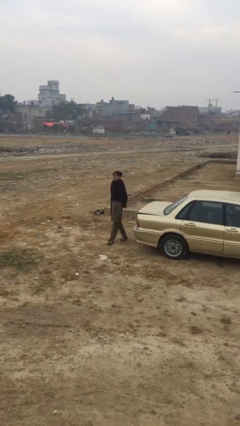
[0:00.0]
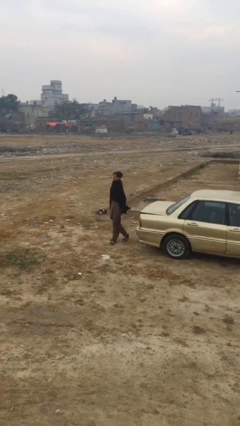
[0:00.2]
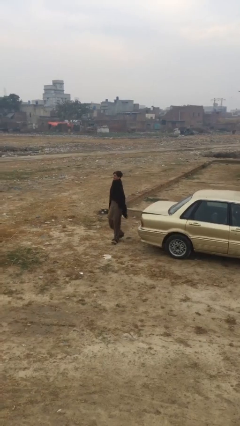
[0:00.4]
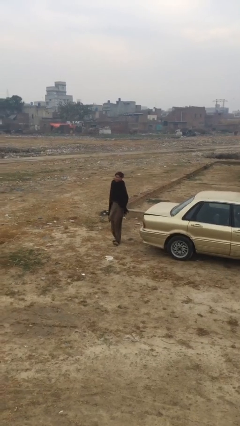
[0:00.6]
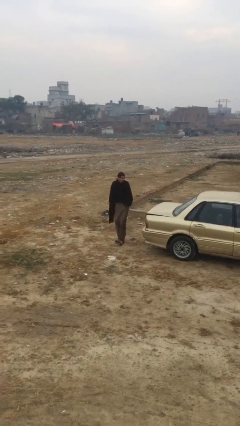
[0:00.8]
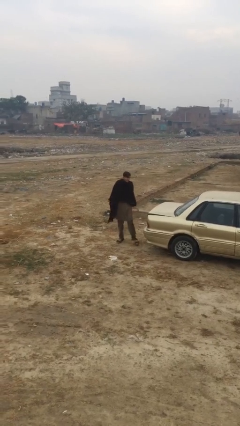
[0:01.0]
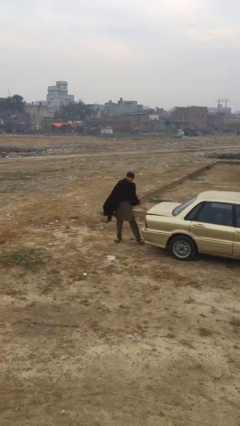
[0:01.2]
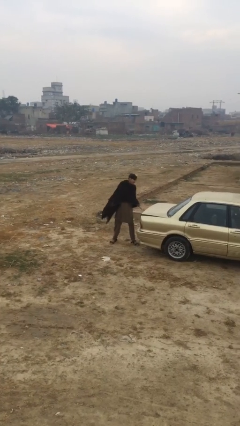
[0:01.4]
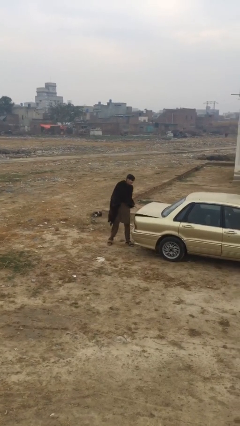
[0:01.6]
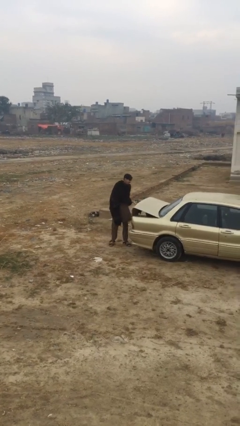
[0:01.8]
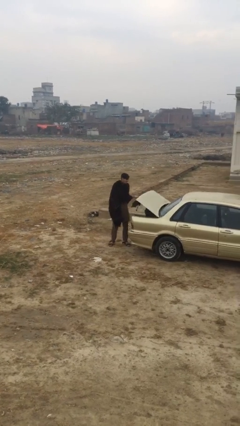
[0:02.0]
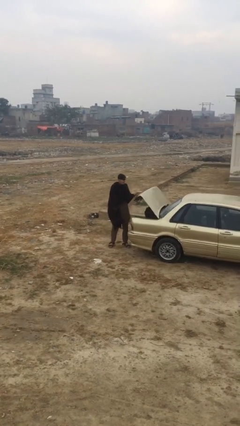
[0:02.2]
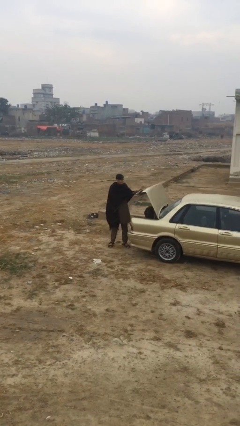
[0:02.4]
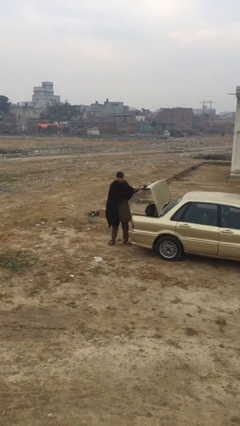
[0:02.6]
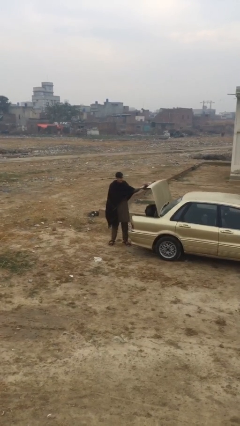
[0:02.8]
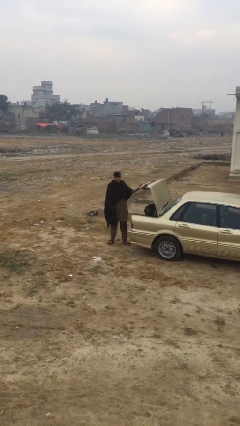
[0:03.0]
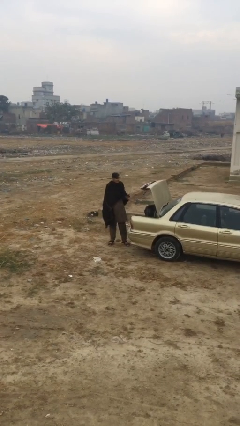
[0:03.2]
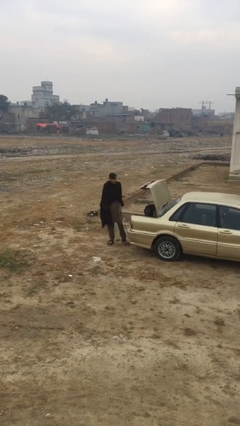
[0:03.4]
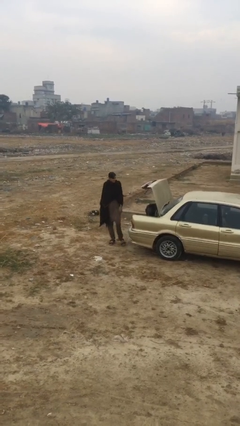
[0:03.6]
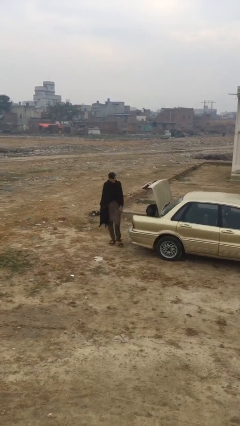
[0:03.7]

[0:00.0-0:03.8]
person opens car trunk

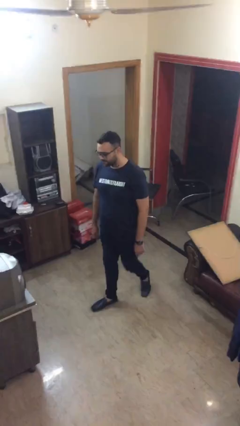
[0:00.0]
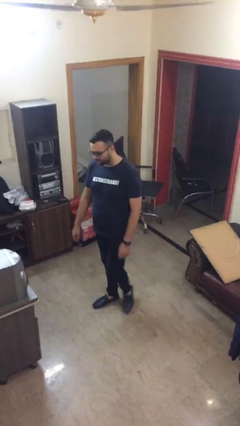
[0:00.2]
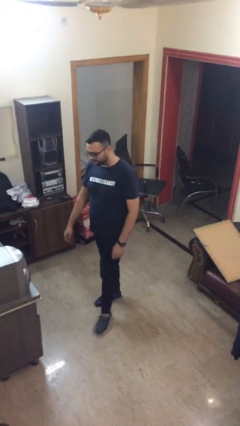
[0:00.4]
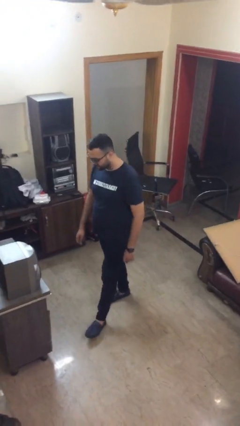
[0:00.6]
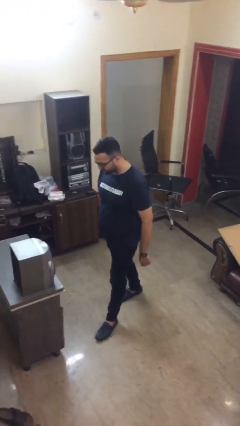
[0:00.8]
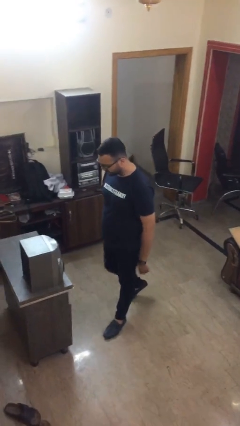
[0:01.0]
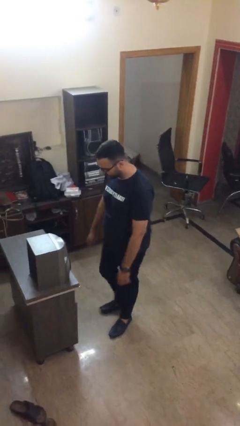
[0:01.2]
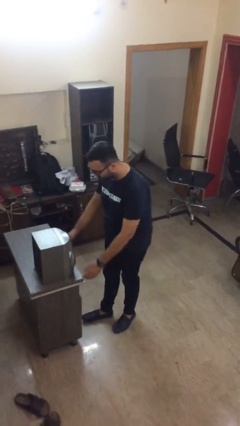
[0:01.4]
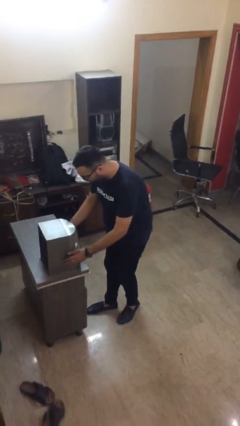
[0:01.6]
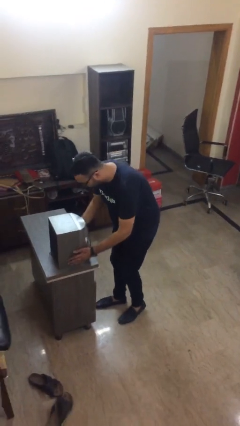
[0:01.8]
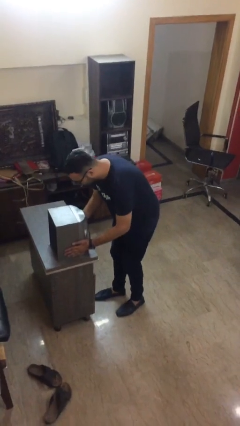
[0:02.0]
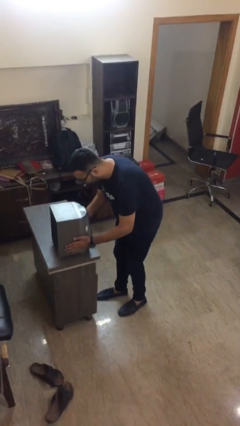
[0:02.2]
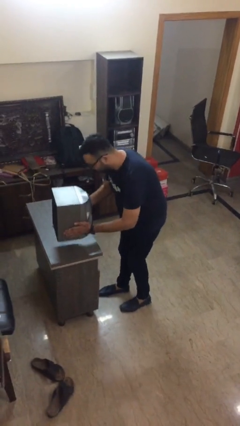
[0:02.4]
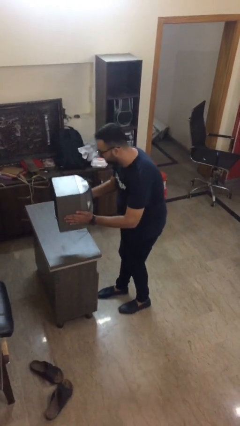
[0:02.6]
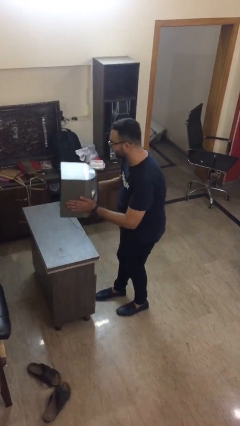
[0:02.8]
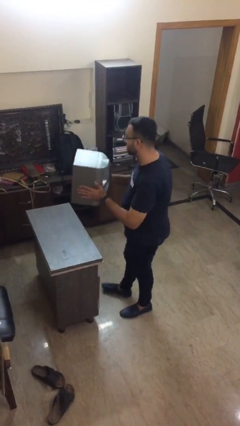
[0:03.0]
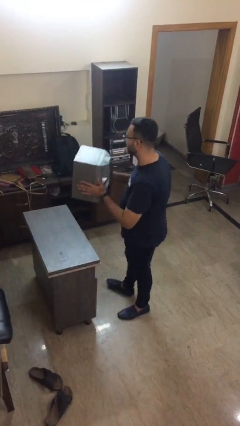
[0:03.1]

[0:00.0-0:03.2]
person picks up object from table

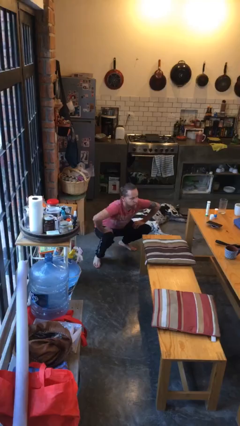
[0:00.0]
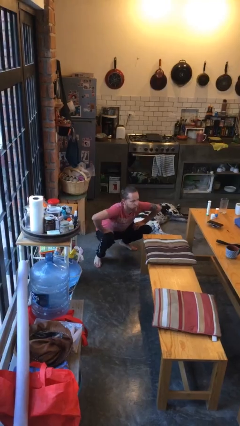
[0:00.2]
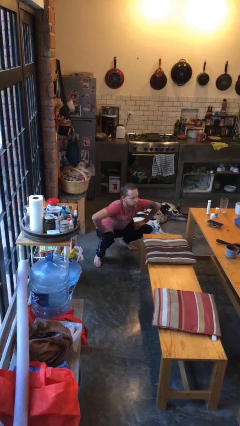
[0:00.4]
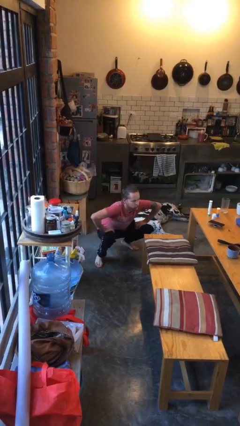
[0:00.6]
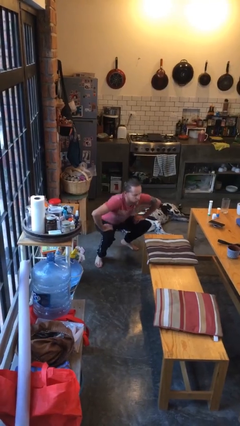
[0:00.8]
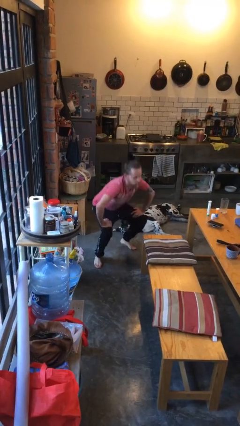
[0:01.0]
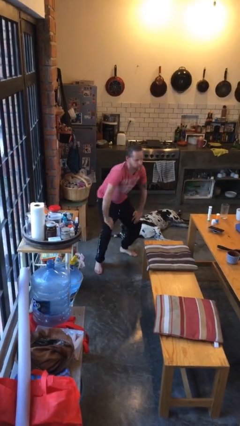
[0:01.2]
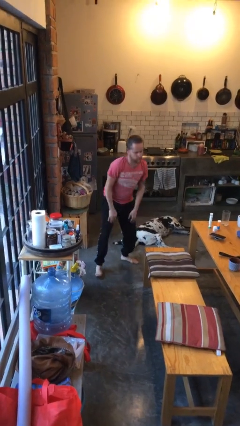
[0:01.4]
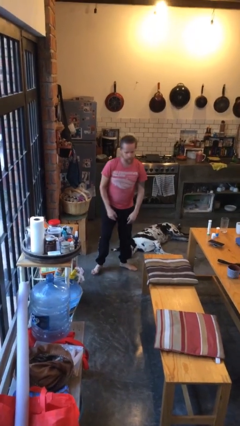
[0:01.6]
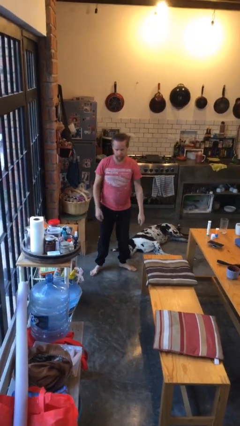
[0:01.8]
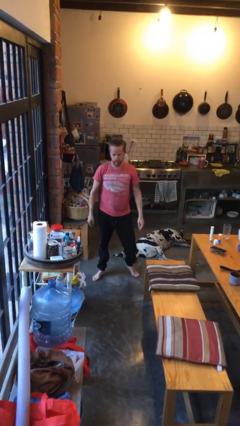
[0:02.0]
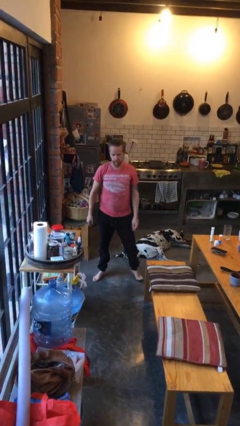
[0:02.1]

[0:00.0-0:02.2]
person stands up

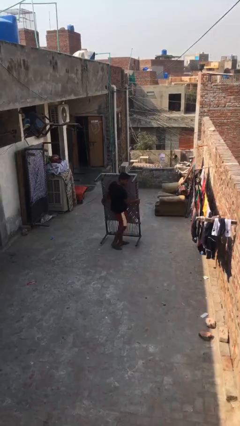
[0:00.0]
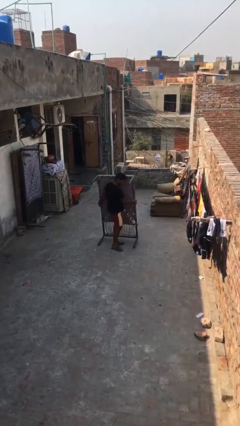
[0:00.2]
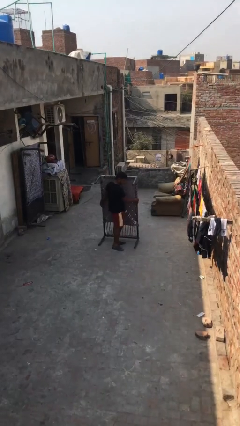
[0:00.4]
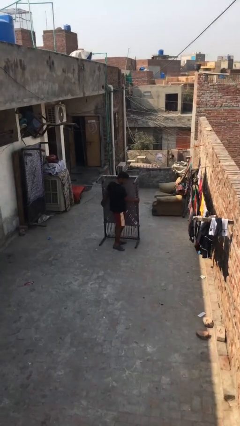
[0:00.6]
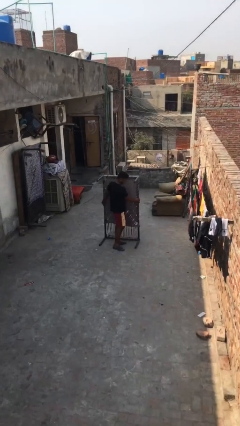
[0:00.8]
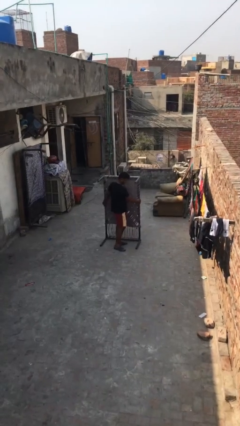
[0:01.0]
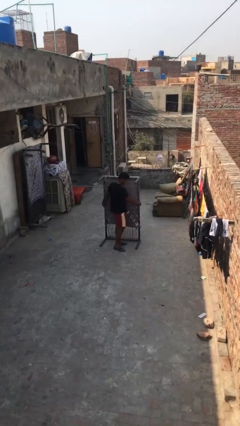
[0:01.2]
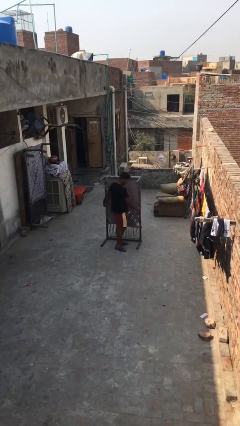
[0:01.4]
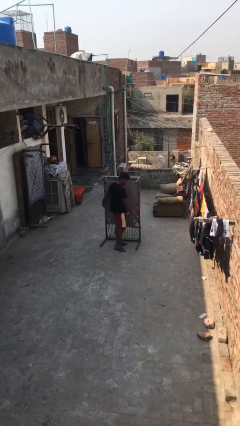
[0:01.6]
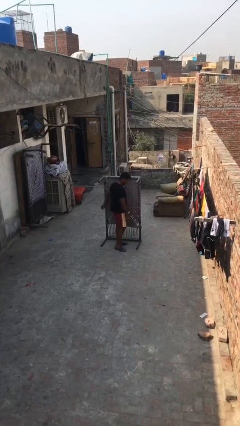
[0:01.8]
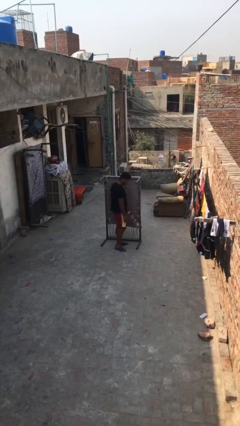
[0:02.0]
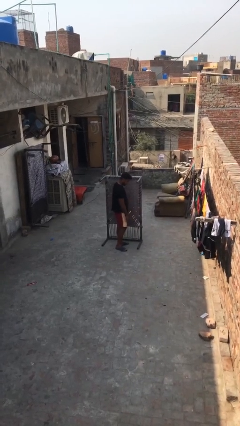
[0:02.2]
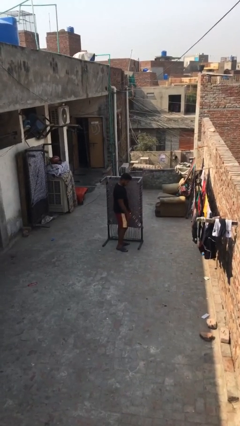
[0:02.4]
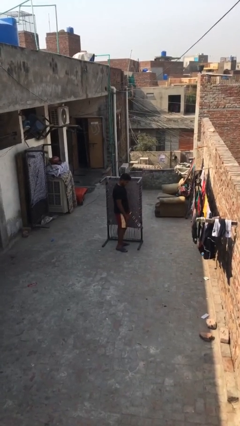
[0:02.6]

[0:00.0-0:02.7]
person puts down object on floor

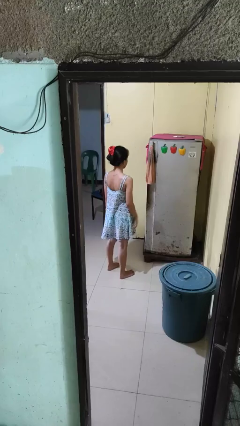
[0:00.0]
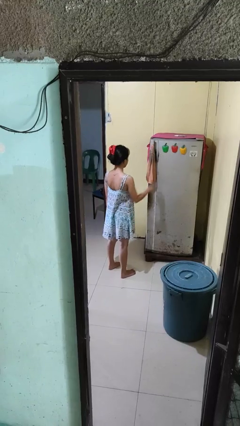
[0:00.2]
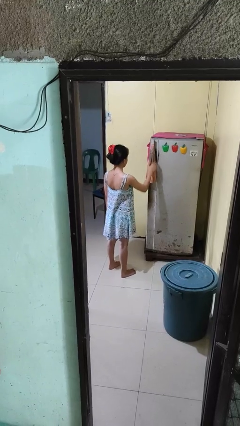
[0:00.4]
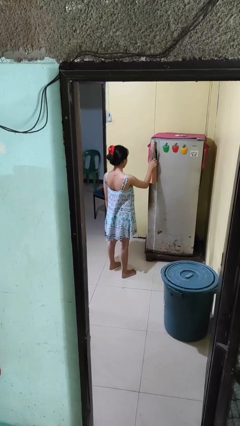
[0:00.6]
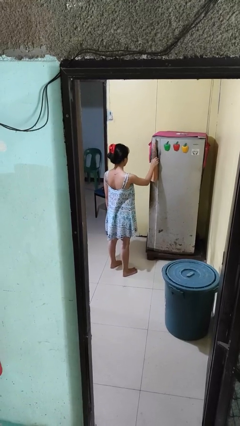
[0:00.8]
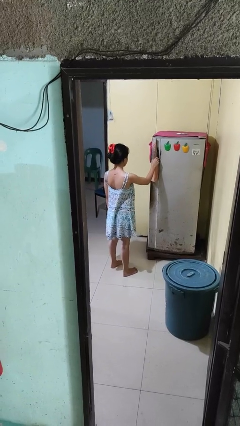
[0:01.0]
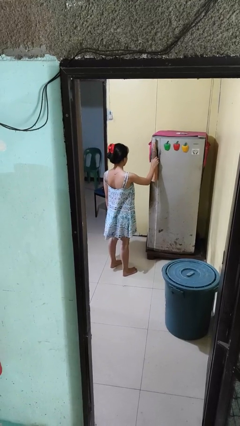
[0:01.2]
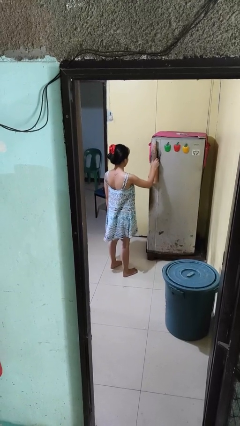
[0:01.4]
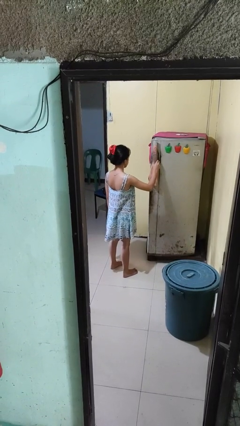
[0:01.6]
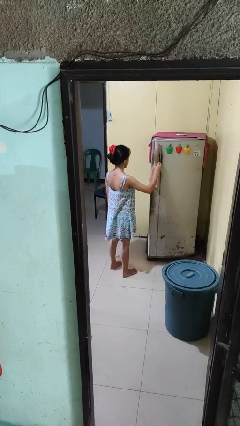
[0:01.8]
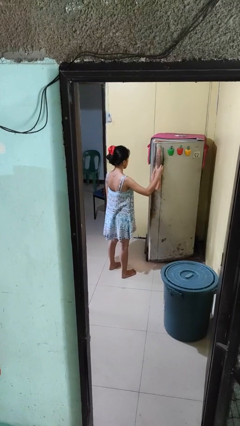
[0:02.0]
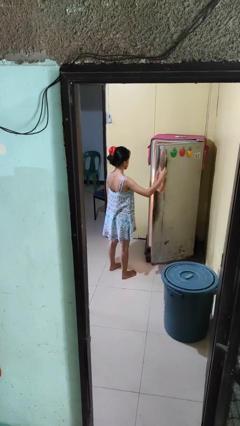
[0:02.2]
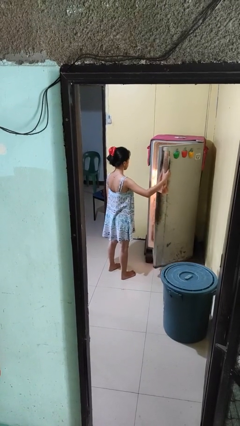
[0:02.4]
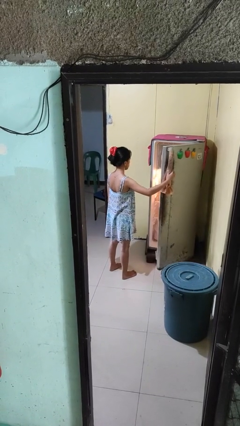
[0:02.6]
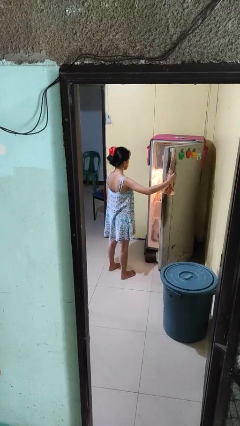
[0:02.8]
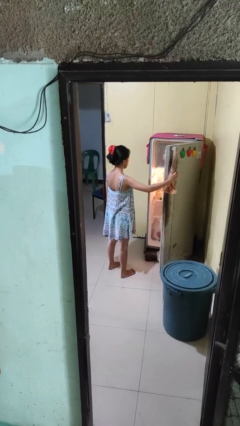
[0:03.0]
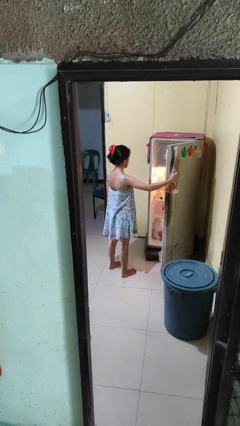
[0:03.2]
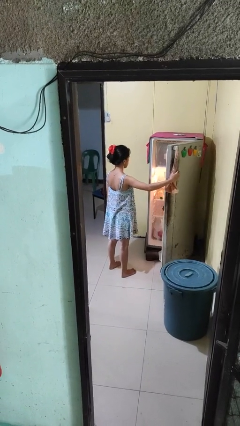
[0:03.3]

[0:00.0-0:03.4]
person opens refrigerator

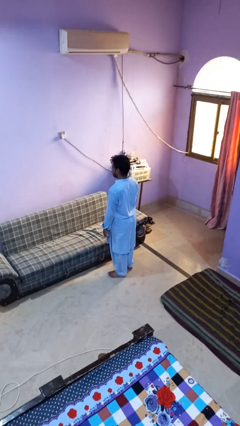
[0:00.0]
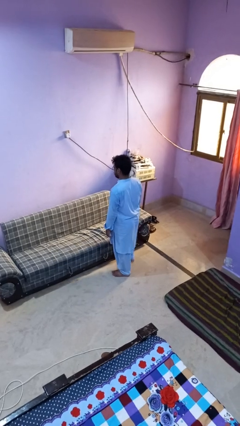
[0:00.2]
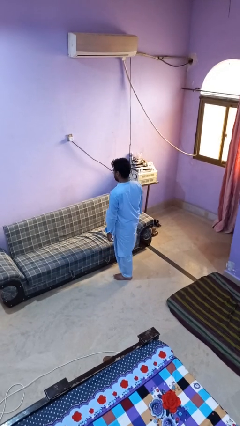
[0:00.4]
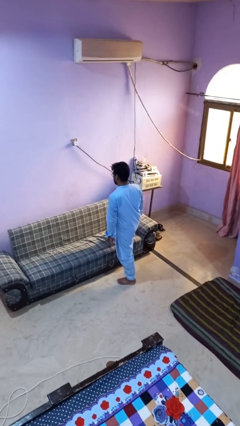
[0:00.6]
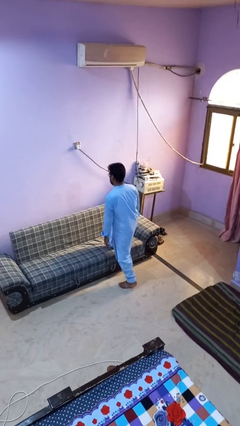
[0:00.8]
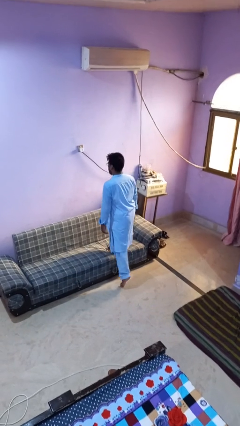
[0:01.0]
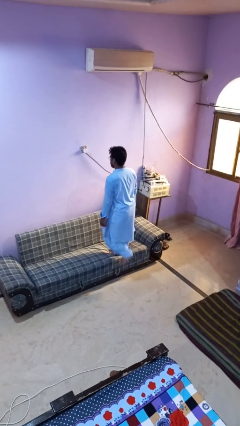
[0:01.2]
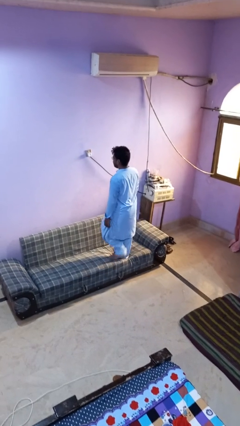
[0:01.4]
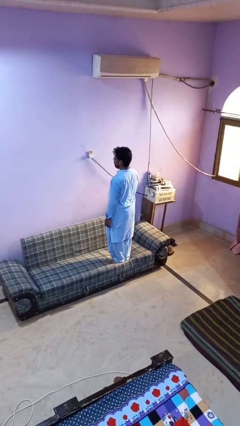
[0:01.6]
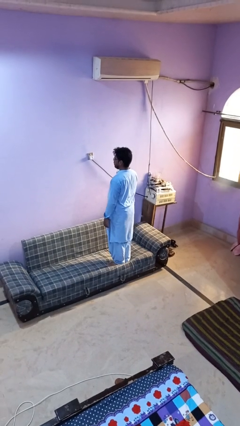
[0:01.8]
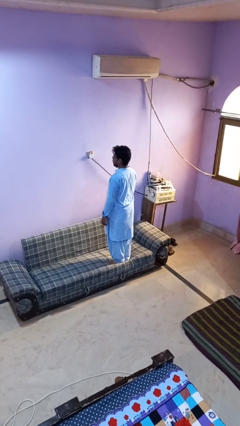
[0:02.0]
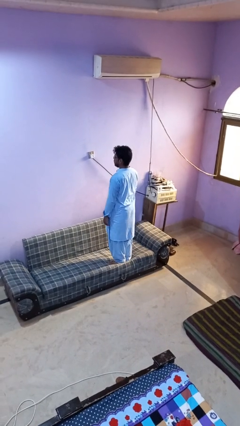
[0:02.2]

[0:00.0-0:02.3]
person climbs on couch
